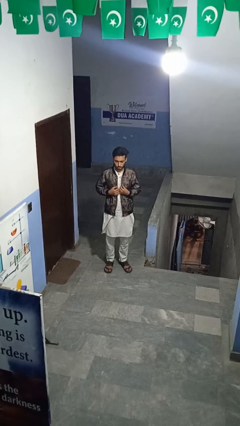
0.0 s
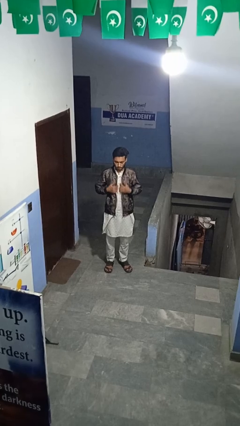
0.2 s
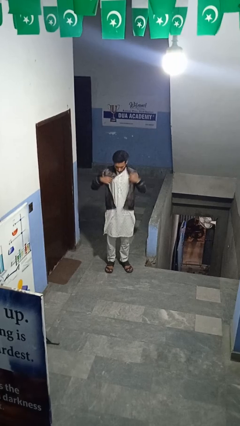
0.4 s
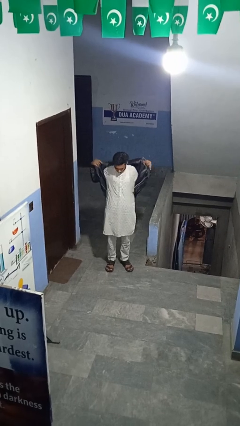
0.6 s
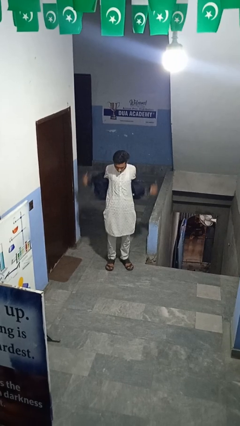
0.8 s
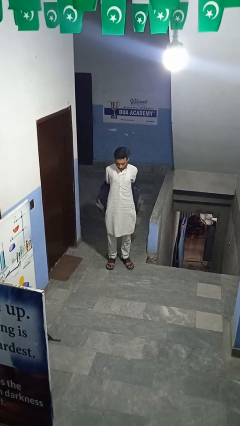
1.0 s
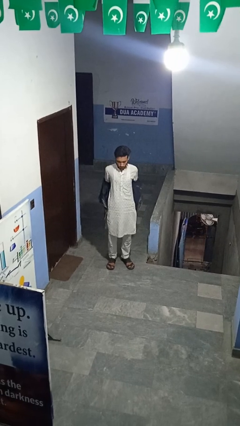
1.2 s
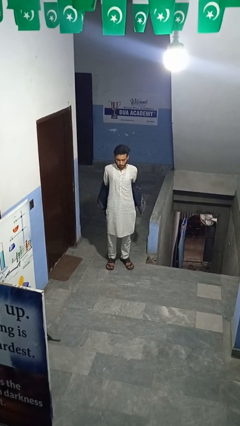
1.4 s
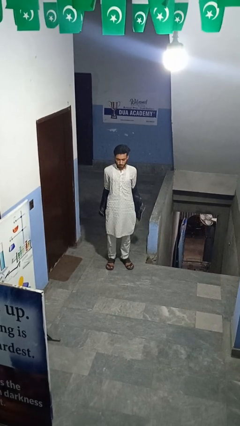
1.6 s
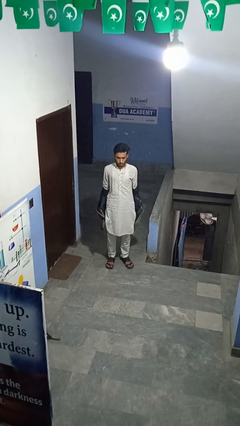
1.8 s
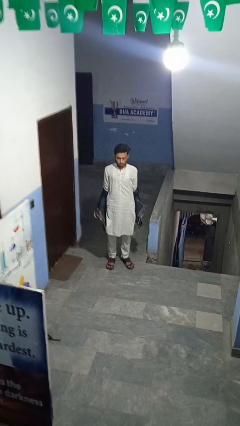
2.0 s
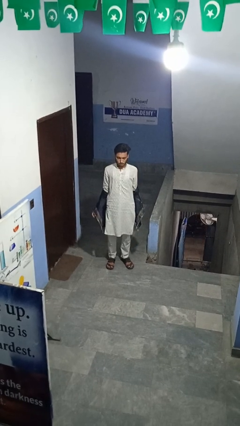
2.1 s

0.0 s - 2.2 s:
person takes off jacket

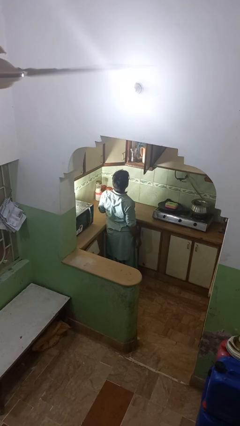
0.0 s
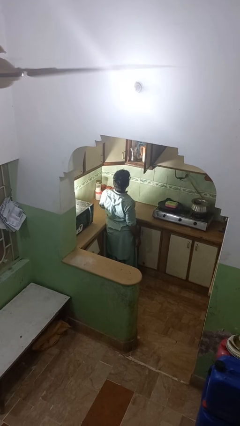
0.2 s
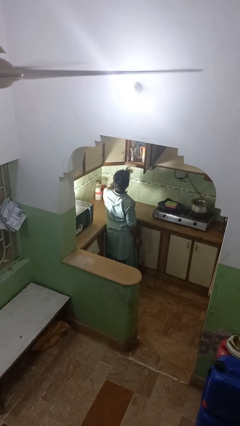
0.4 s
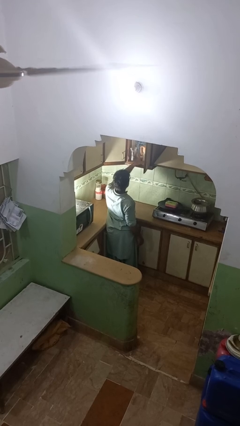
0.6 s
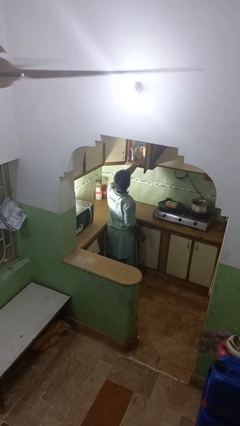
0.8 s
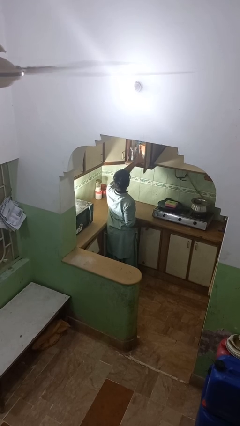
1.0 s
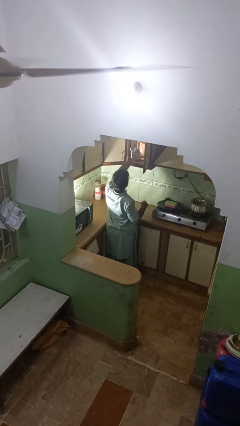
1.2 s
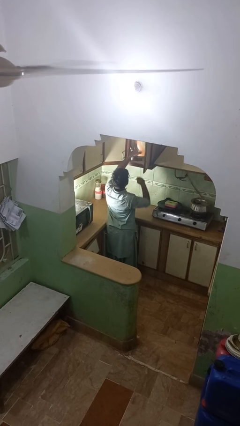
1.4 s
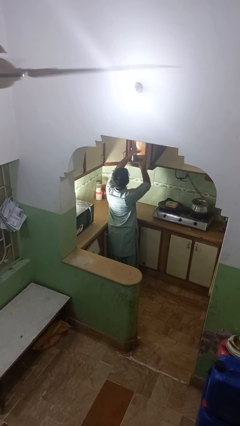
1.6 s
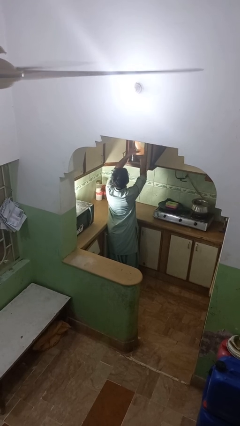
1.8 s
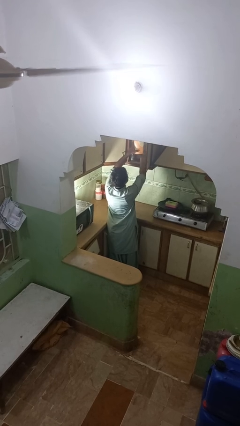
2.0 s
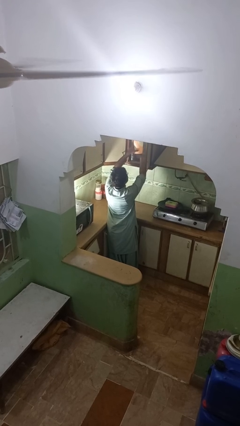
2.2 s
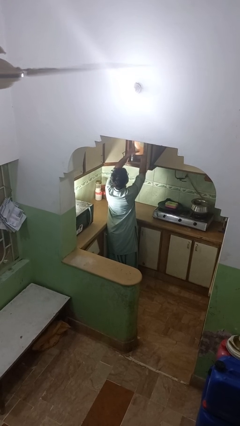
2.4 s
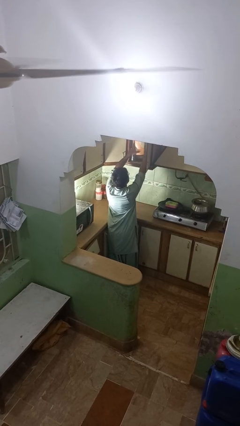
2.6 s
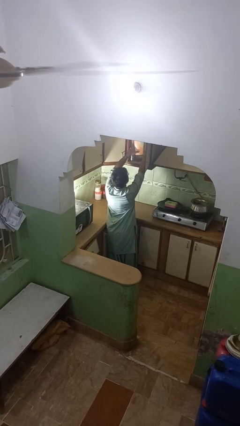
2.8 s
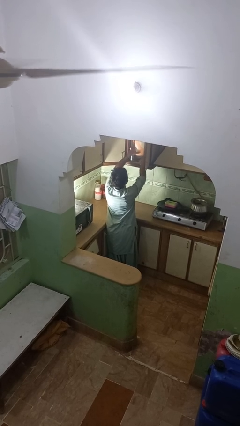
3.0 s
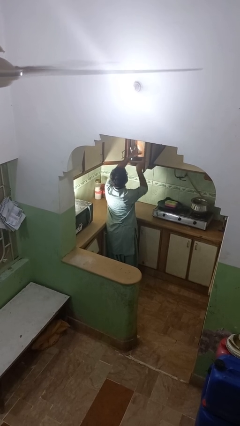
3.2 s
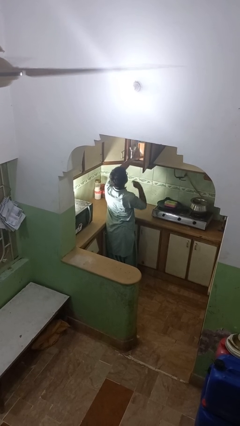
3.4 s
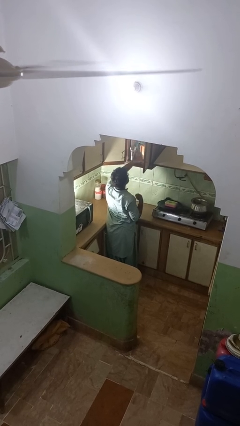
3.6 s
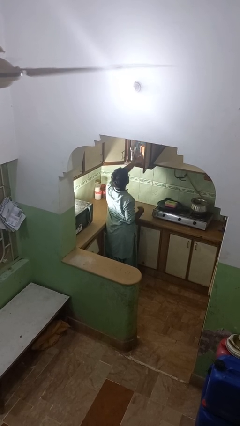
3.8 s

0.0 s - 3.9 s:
person searches in kitchen drawer

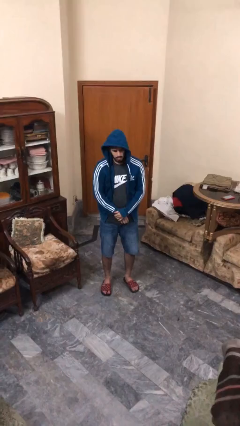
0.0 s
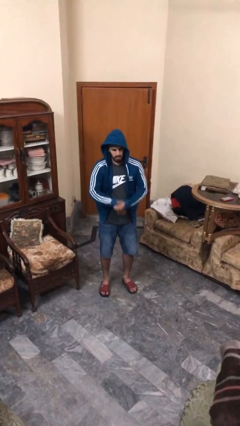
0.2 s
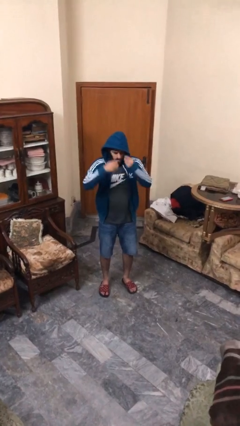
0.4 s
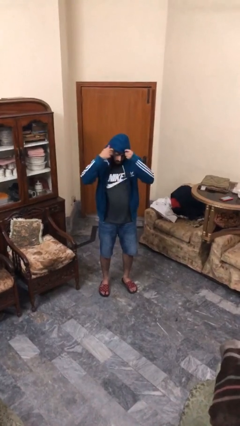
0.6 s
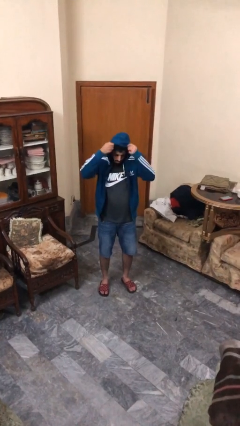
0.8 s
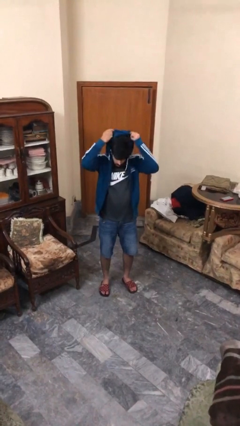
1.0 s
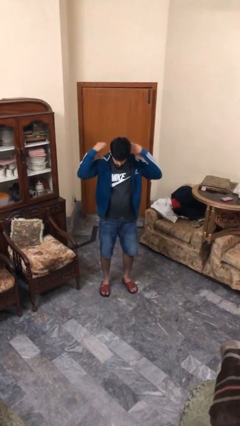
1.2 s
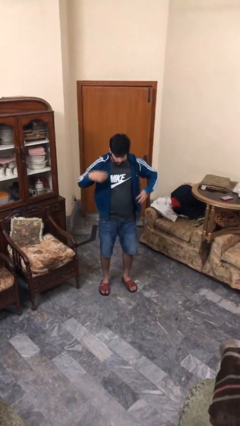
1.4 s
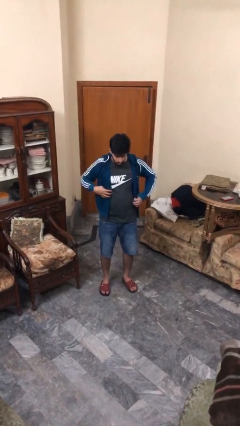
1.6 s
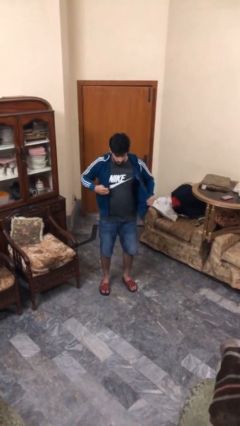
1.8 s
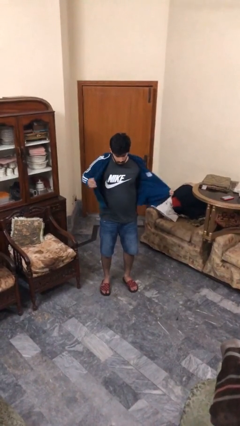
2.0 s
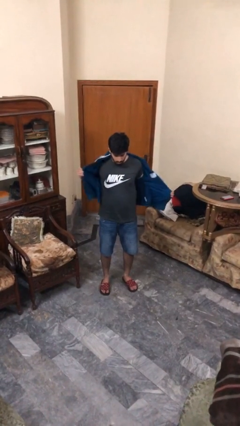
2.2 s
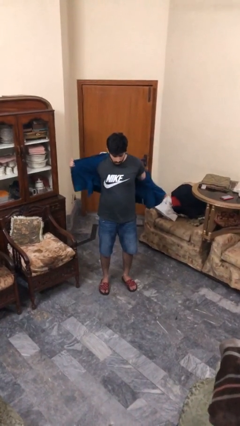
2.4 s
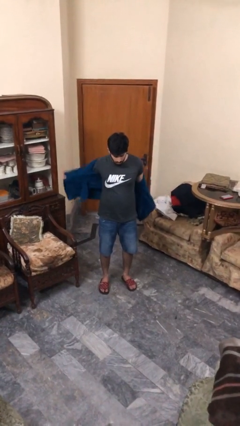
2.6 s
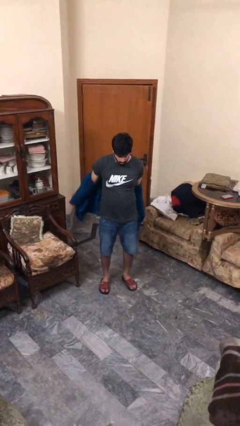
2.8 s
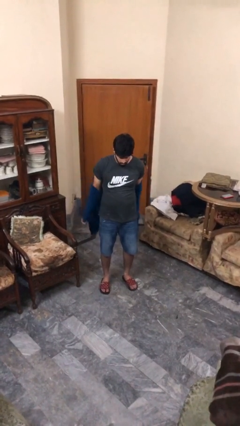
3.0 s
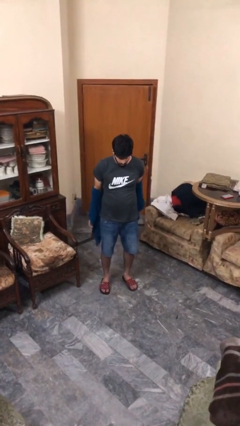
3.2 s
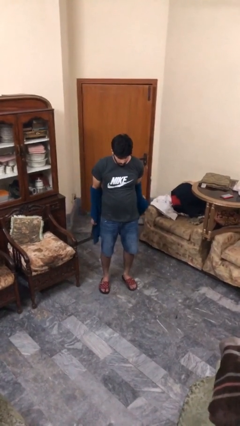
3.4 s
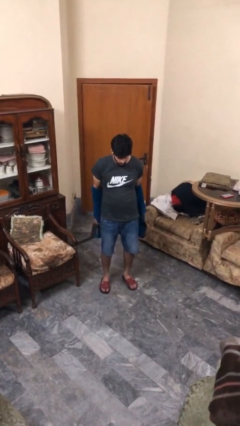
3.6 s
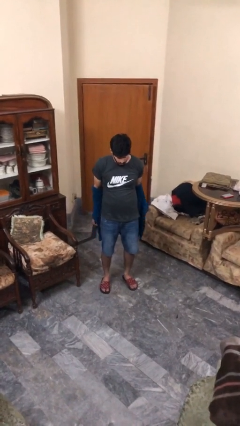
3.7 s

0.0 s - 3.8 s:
person takes off hoodie

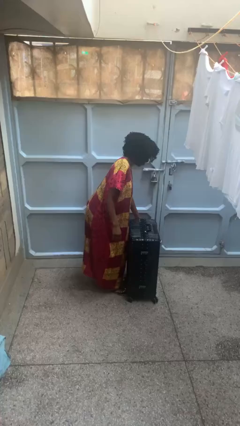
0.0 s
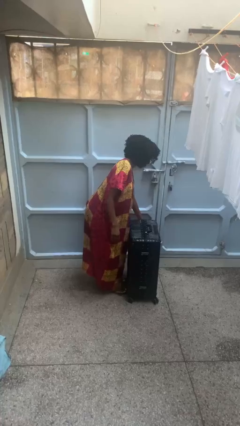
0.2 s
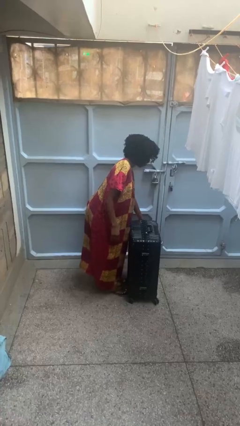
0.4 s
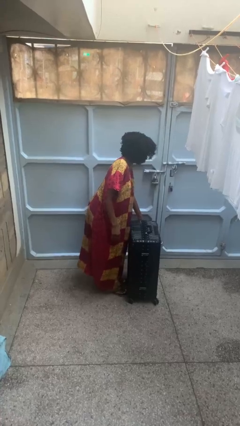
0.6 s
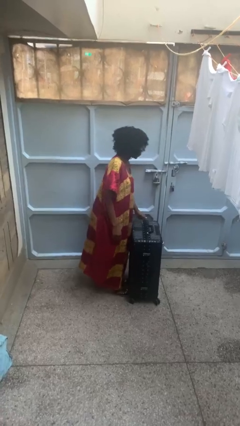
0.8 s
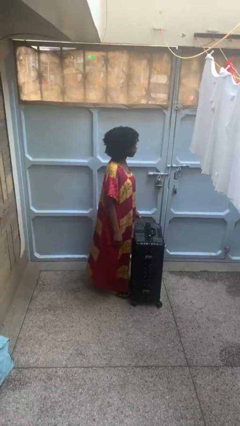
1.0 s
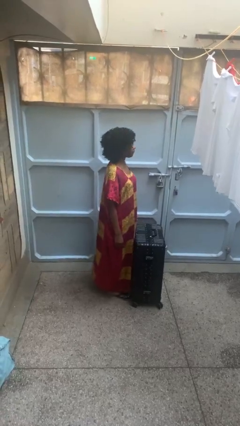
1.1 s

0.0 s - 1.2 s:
person closes suitcase

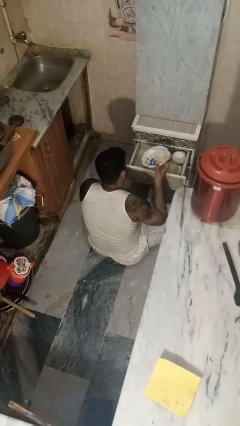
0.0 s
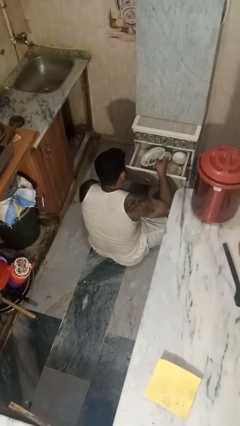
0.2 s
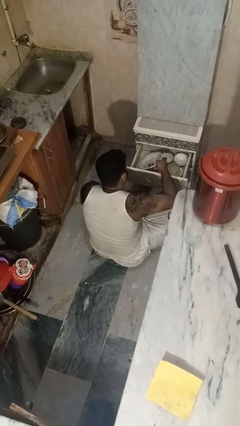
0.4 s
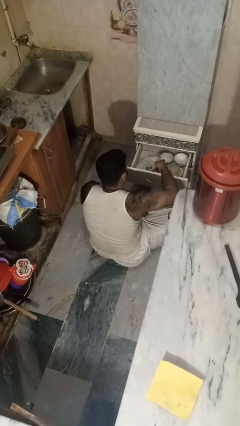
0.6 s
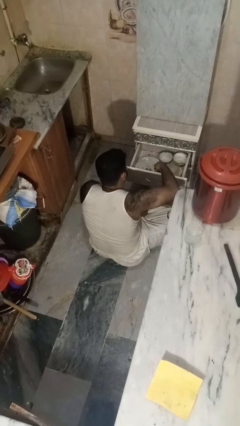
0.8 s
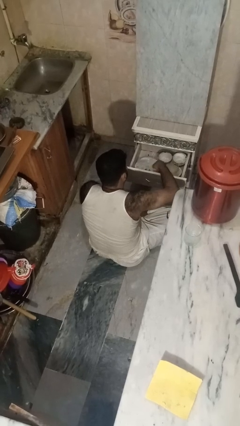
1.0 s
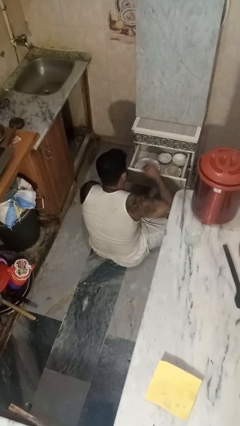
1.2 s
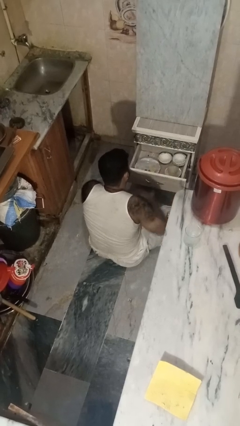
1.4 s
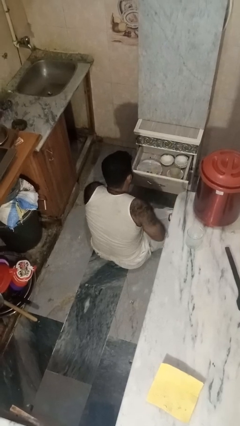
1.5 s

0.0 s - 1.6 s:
person puts object into kitchen drawer

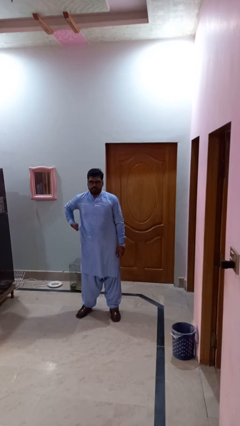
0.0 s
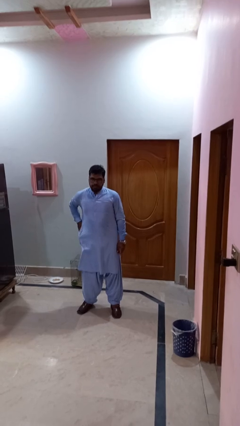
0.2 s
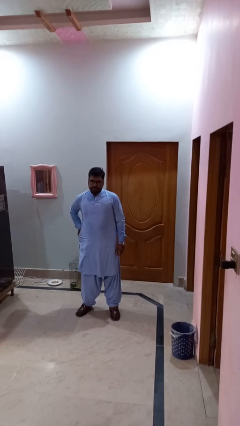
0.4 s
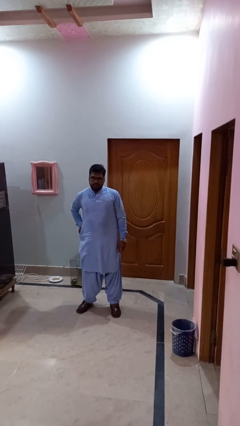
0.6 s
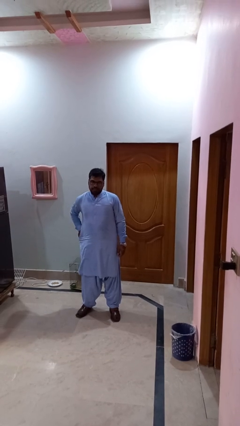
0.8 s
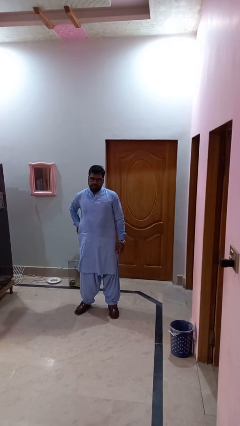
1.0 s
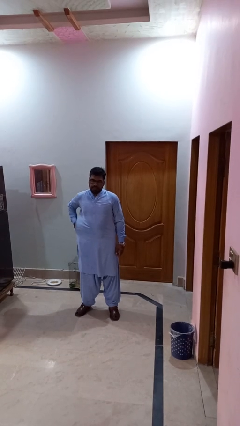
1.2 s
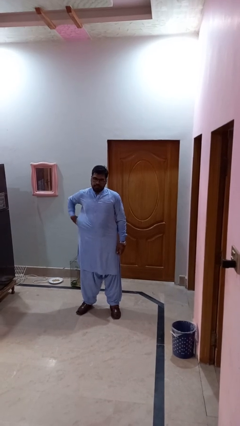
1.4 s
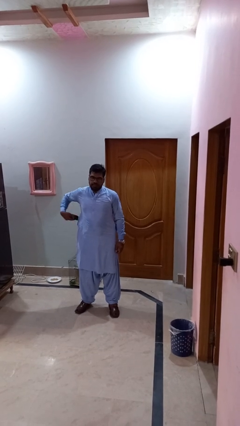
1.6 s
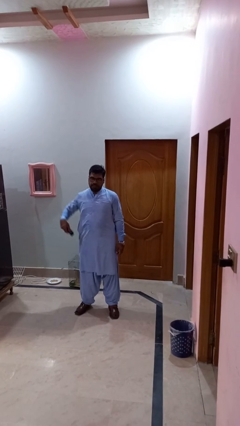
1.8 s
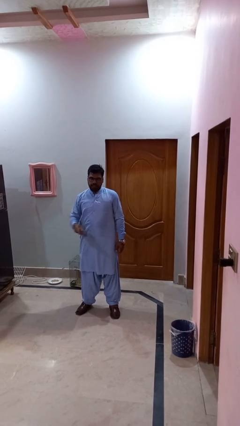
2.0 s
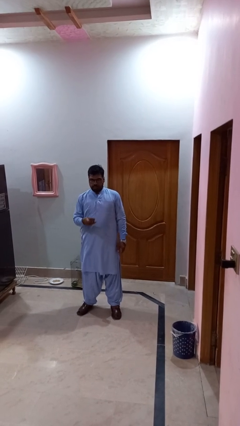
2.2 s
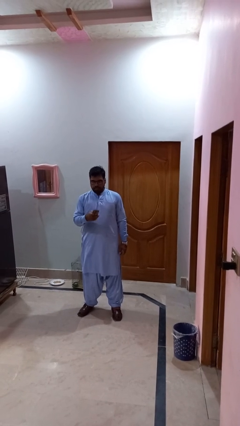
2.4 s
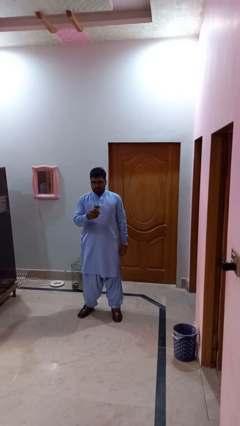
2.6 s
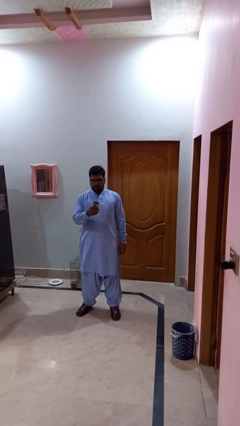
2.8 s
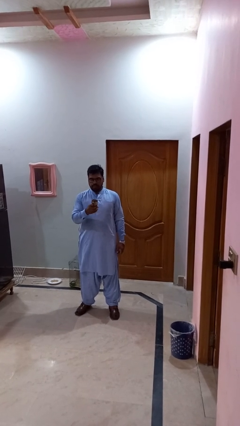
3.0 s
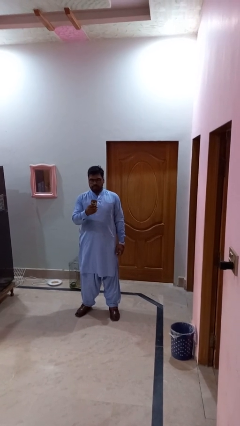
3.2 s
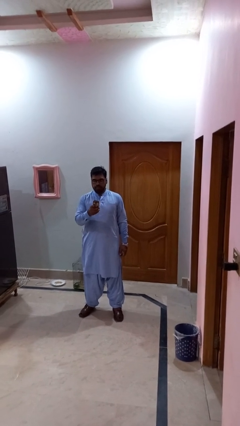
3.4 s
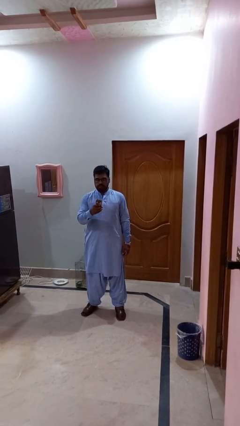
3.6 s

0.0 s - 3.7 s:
person takes phone from pocket

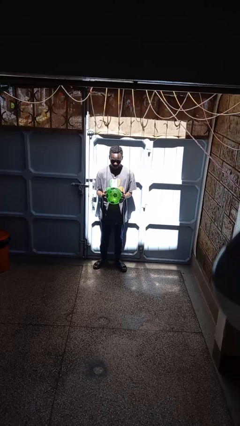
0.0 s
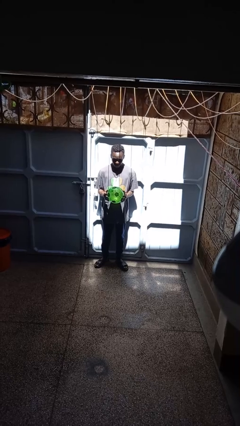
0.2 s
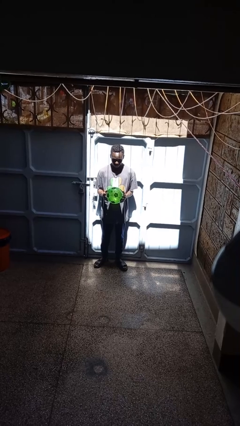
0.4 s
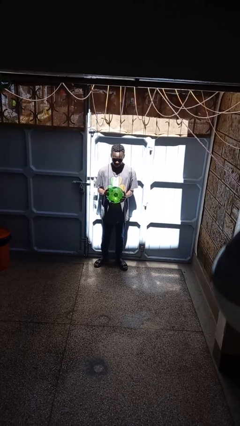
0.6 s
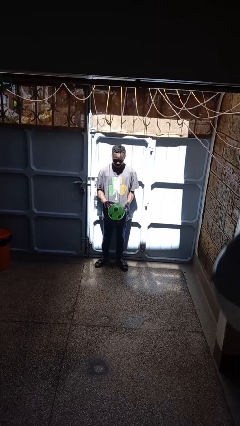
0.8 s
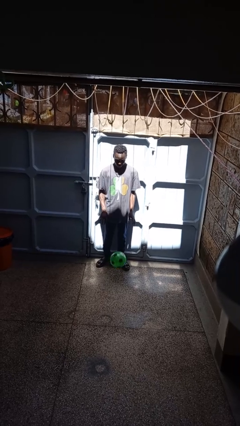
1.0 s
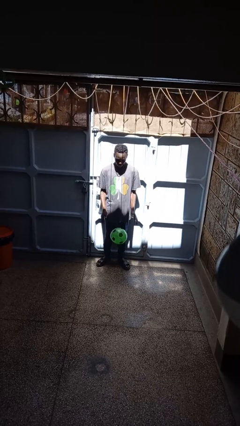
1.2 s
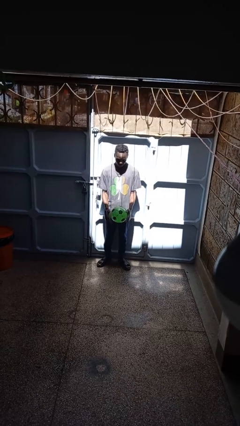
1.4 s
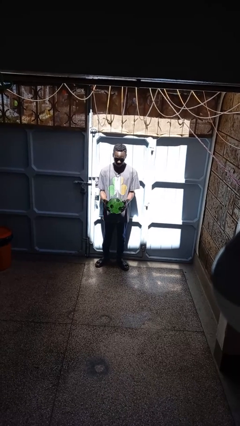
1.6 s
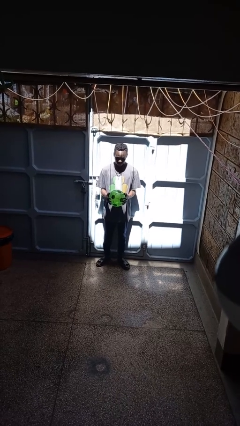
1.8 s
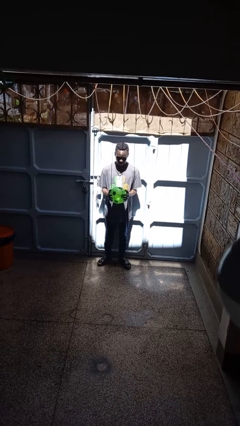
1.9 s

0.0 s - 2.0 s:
person bounces ball on floor
